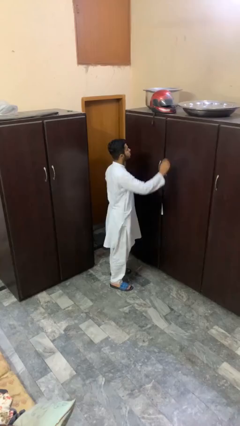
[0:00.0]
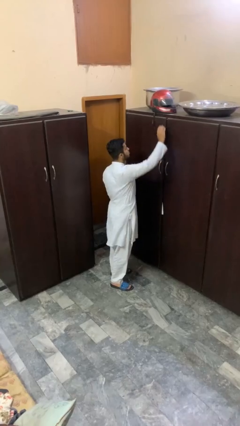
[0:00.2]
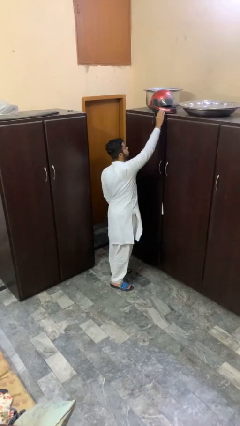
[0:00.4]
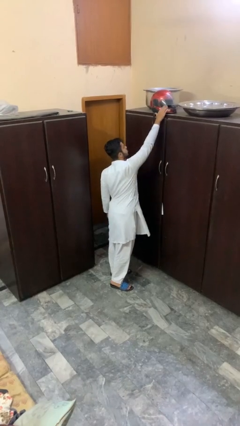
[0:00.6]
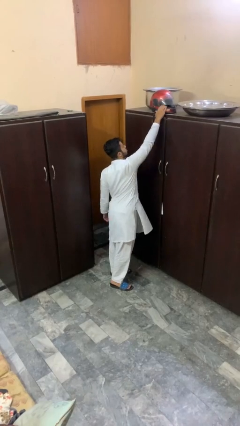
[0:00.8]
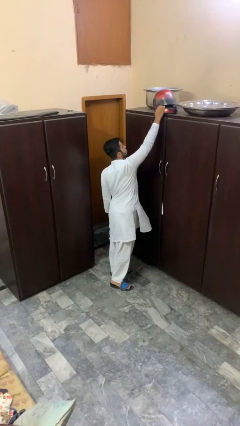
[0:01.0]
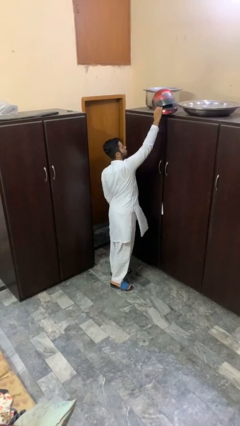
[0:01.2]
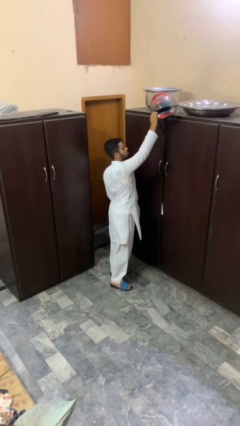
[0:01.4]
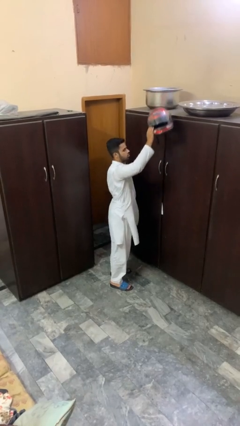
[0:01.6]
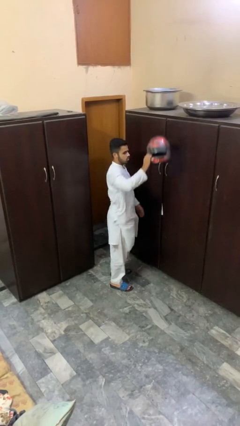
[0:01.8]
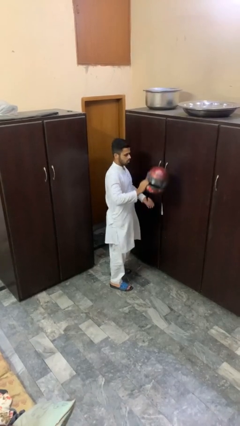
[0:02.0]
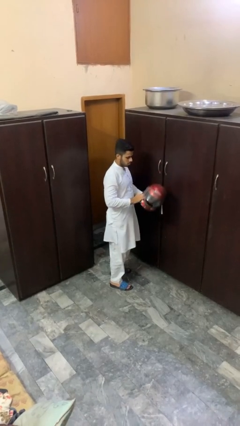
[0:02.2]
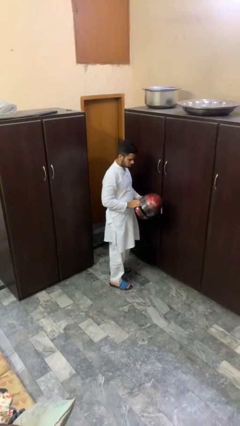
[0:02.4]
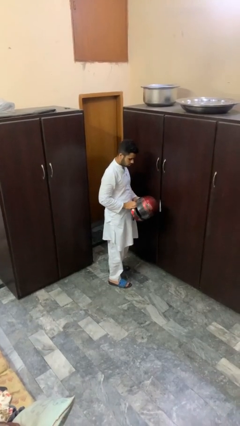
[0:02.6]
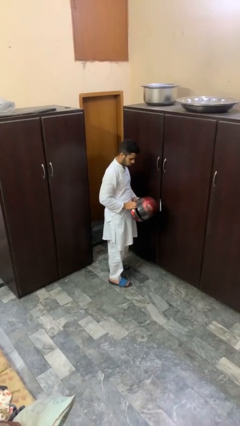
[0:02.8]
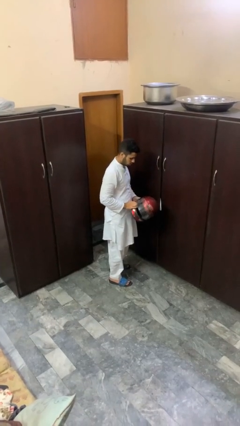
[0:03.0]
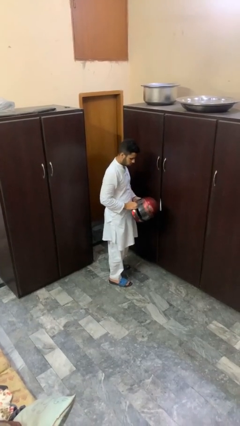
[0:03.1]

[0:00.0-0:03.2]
person picks up object from shelf

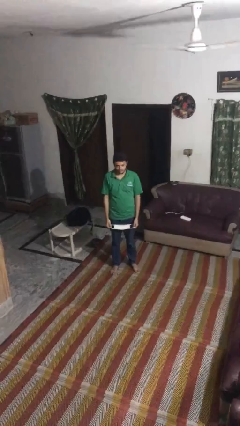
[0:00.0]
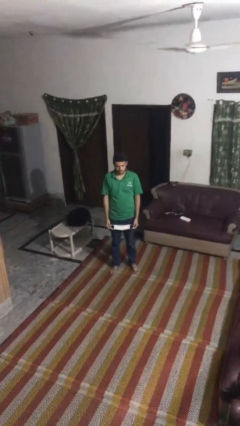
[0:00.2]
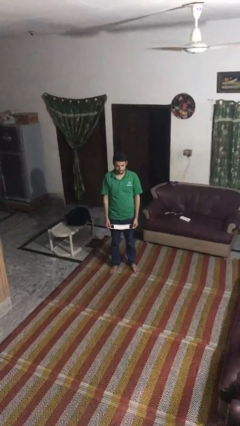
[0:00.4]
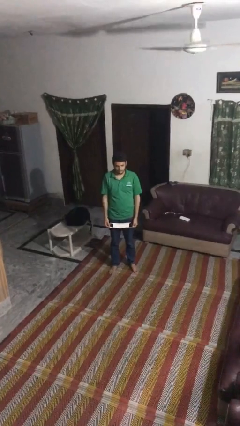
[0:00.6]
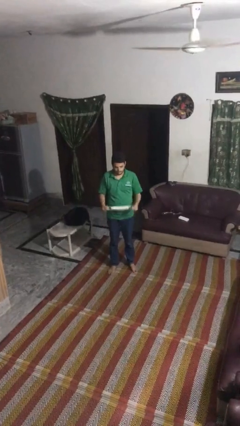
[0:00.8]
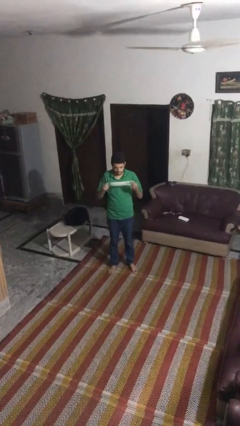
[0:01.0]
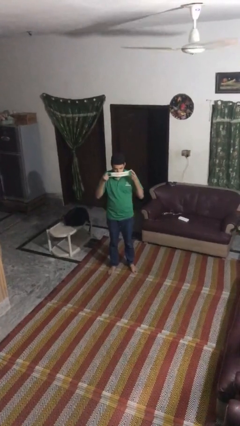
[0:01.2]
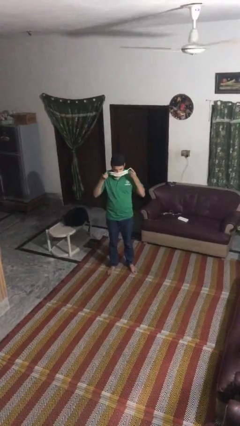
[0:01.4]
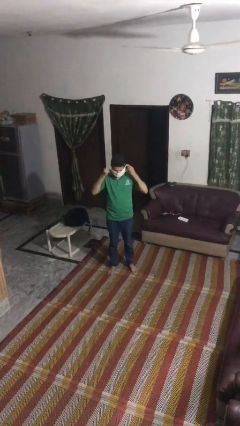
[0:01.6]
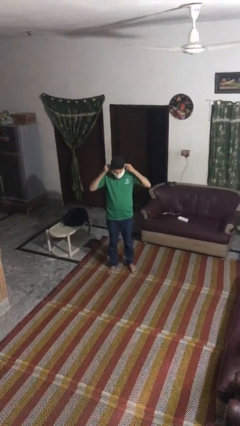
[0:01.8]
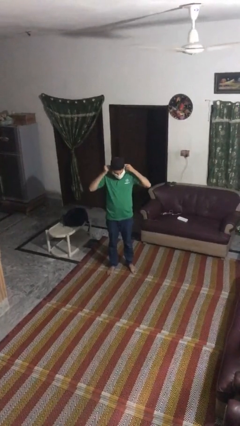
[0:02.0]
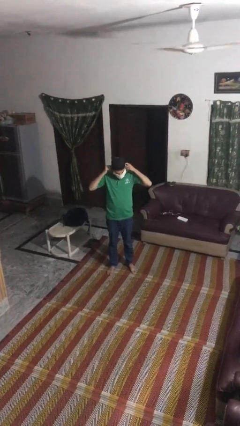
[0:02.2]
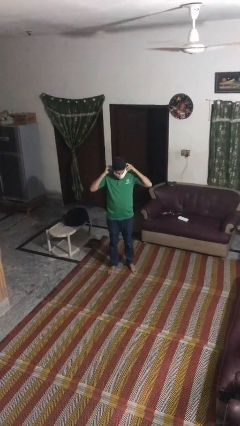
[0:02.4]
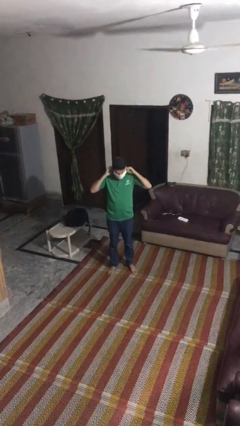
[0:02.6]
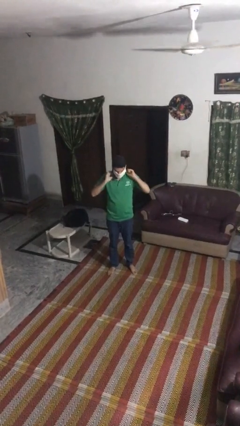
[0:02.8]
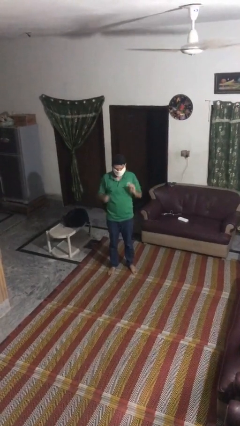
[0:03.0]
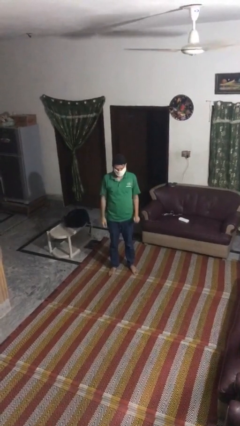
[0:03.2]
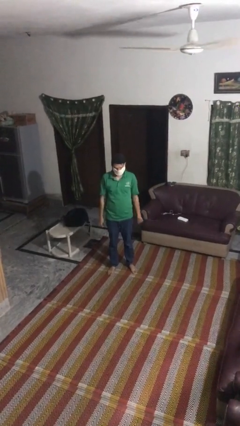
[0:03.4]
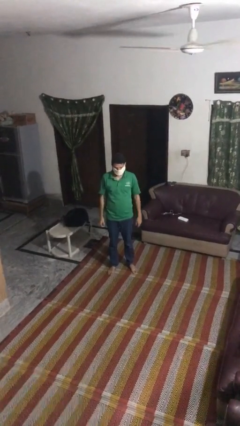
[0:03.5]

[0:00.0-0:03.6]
person puts on facemask

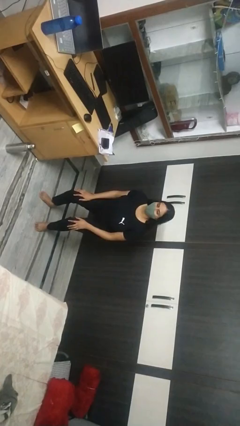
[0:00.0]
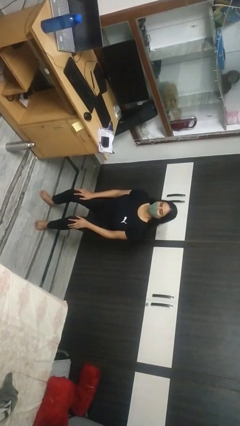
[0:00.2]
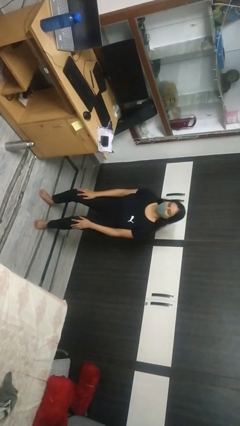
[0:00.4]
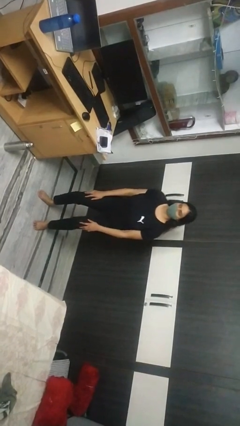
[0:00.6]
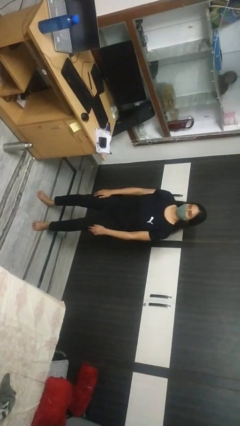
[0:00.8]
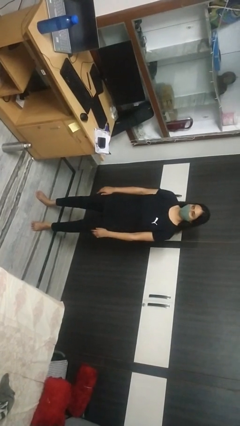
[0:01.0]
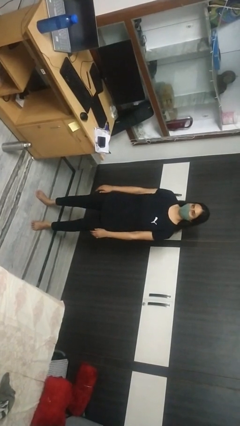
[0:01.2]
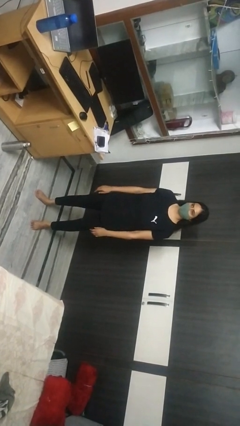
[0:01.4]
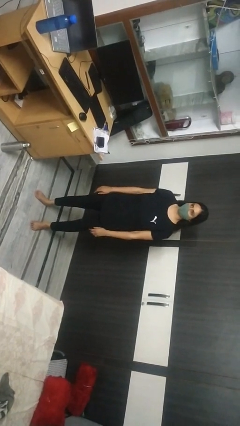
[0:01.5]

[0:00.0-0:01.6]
person stands up

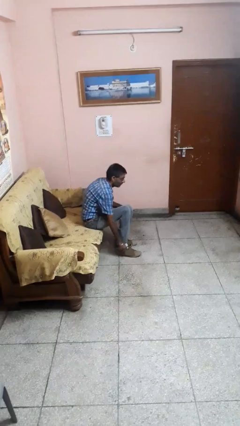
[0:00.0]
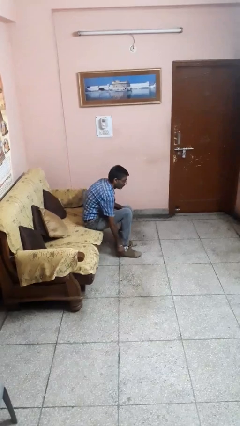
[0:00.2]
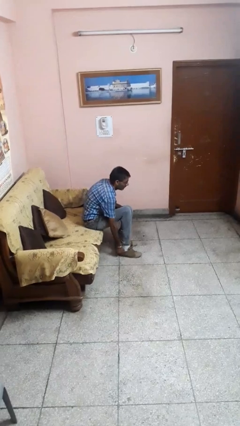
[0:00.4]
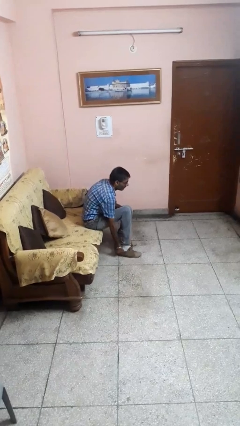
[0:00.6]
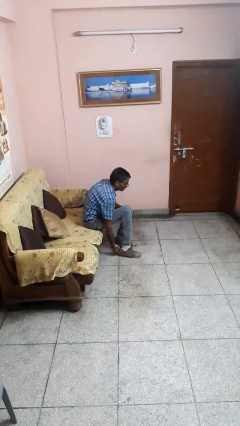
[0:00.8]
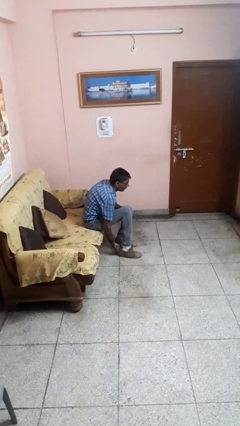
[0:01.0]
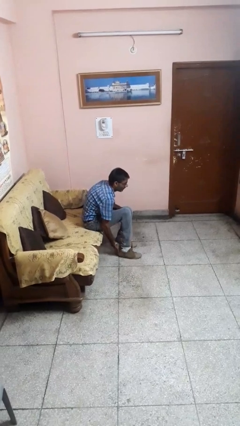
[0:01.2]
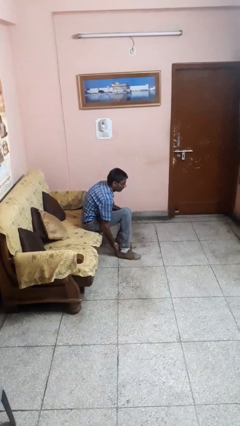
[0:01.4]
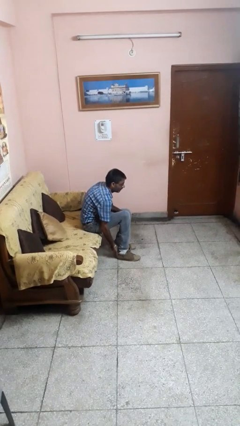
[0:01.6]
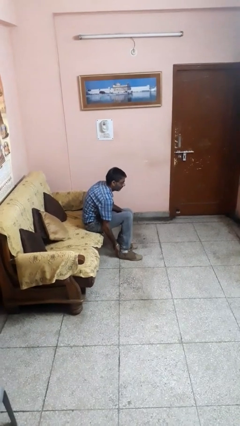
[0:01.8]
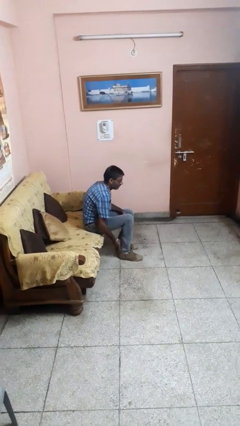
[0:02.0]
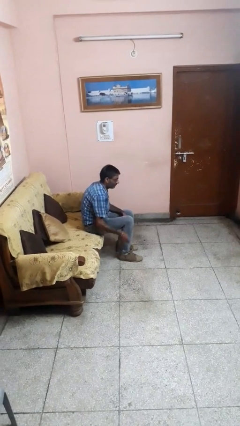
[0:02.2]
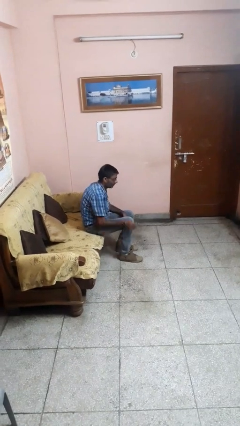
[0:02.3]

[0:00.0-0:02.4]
person puts on shoes

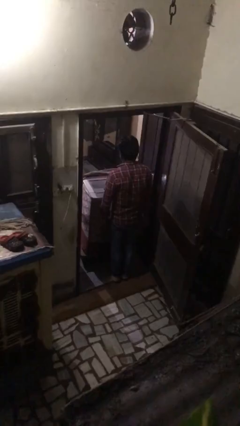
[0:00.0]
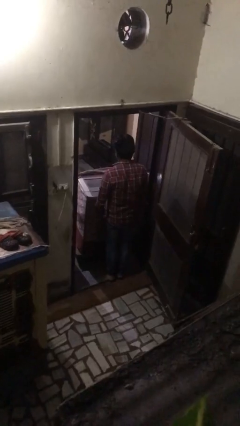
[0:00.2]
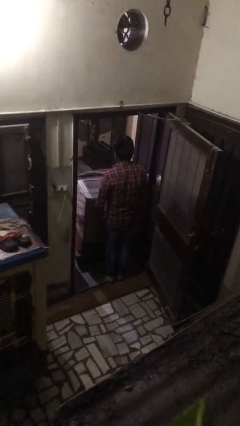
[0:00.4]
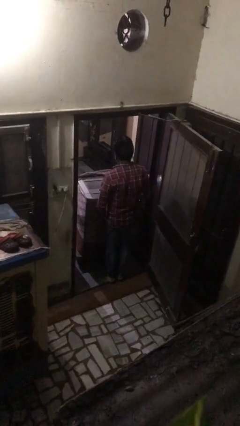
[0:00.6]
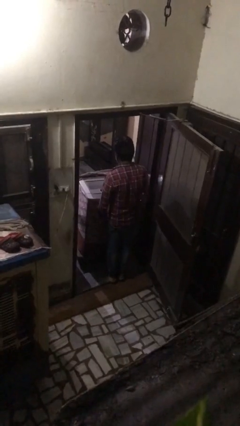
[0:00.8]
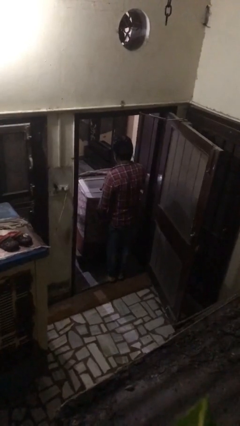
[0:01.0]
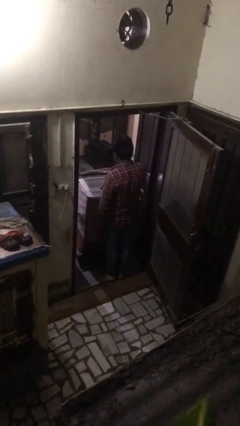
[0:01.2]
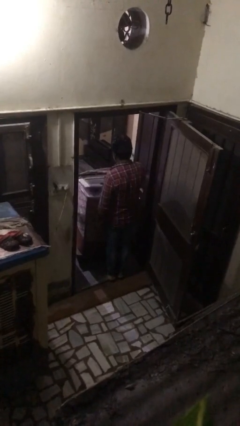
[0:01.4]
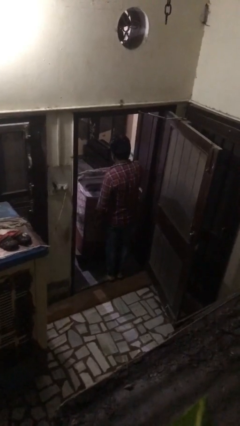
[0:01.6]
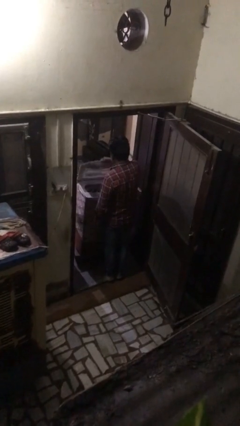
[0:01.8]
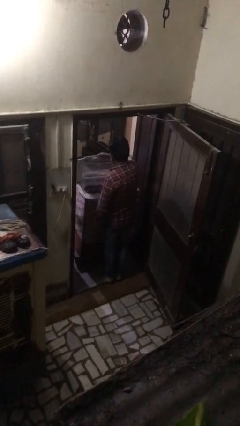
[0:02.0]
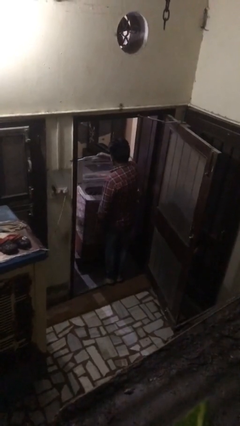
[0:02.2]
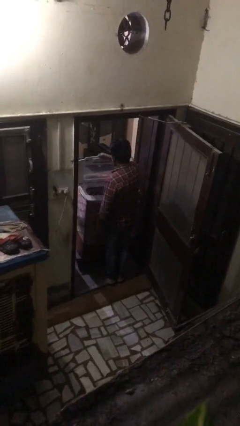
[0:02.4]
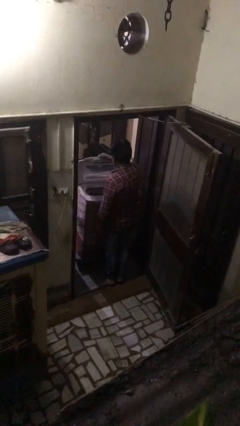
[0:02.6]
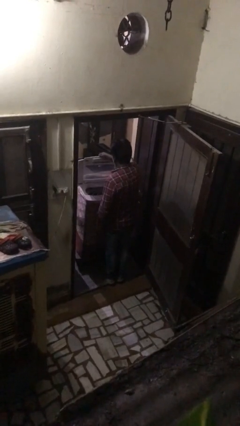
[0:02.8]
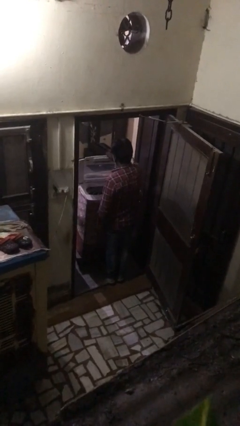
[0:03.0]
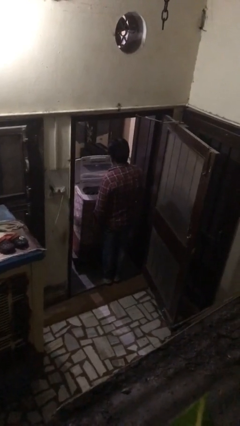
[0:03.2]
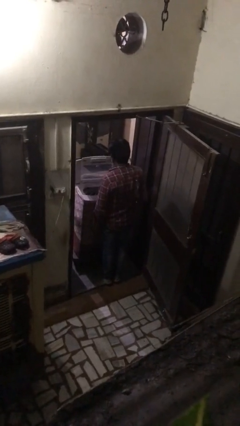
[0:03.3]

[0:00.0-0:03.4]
person opens clothes washer

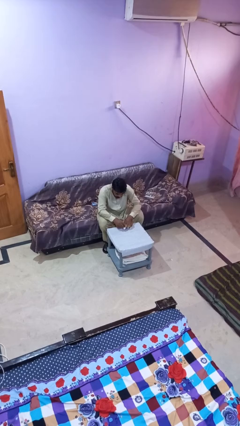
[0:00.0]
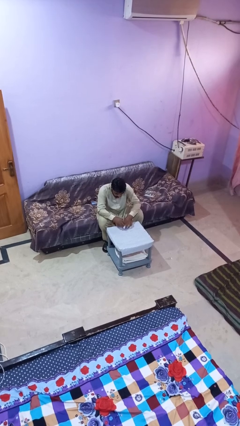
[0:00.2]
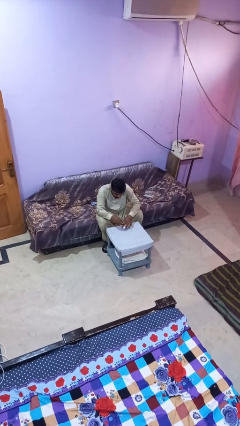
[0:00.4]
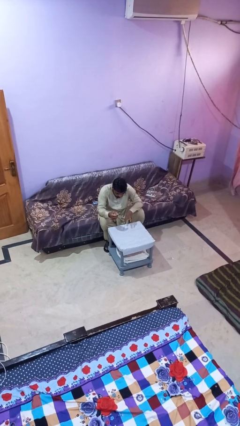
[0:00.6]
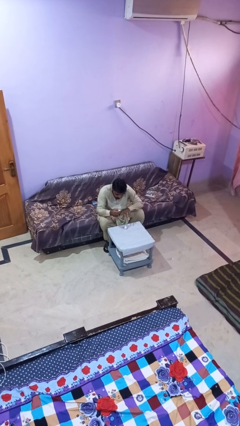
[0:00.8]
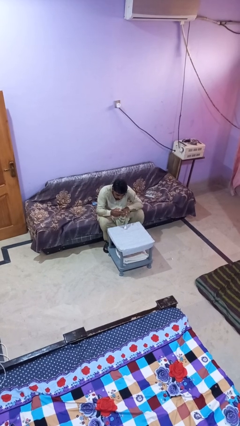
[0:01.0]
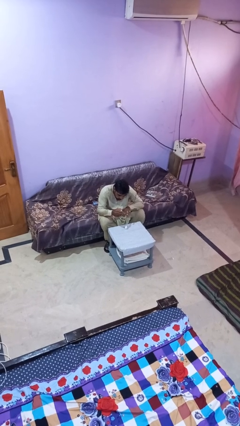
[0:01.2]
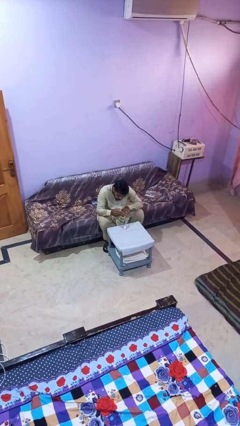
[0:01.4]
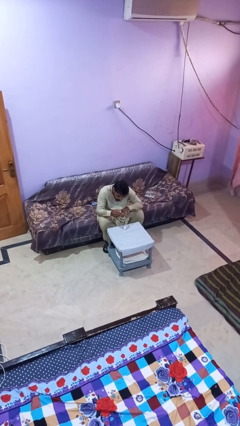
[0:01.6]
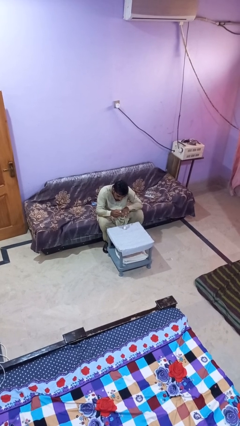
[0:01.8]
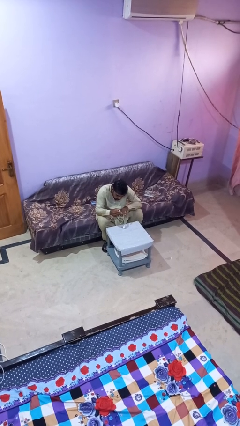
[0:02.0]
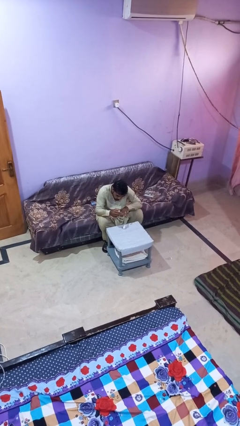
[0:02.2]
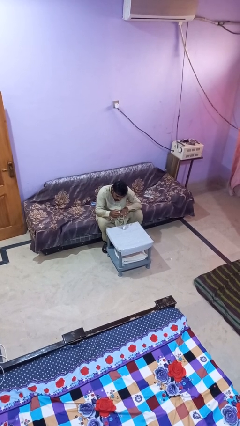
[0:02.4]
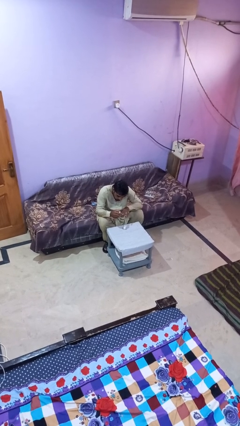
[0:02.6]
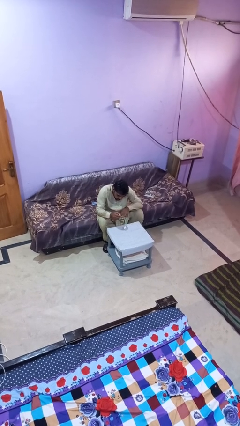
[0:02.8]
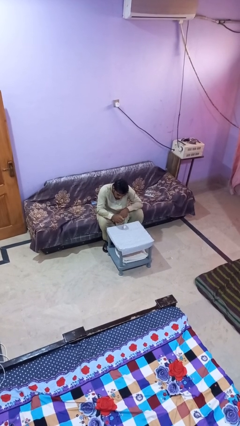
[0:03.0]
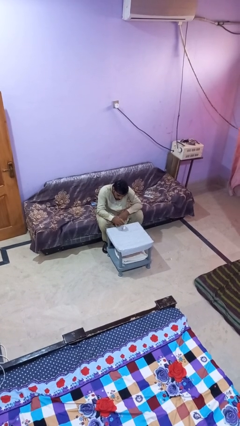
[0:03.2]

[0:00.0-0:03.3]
person paints fingernails
